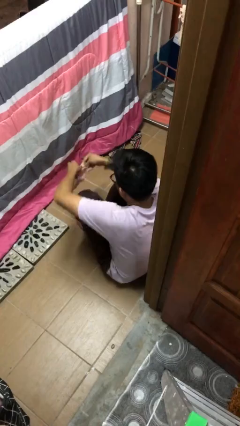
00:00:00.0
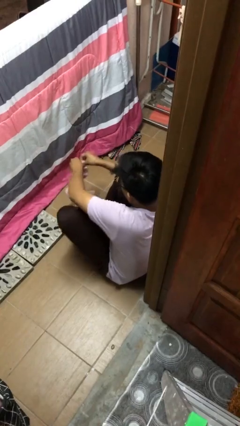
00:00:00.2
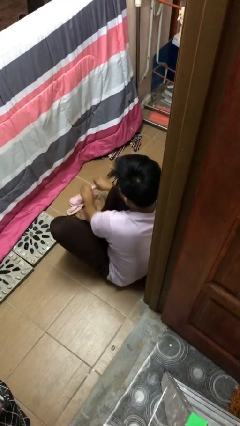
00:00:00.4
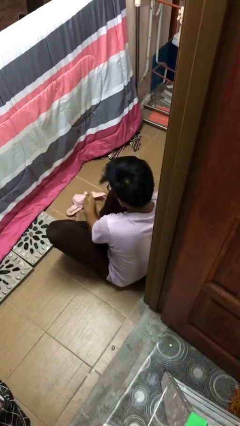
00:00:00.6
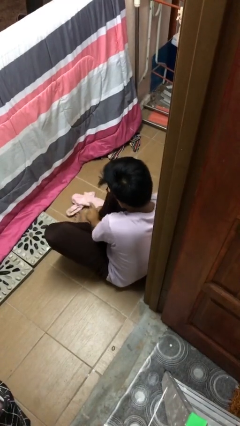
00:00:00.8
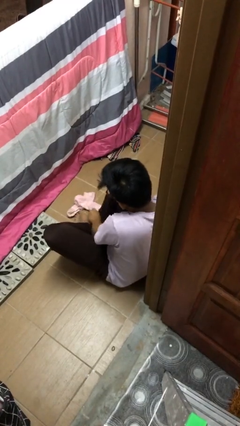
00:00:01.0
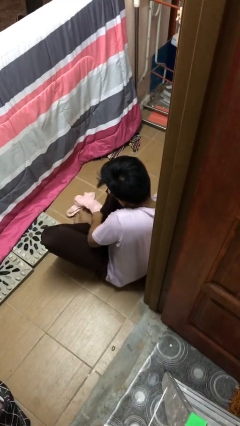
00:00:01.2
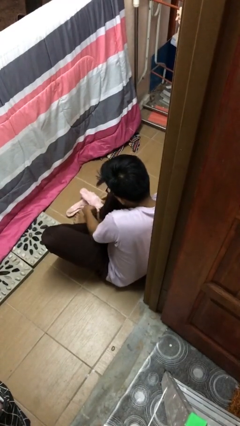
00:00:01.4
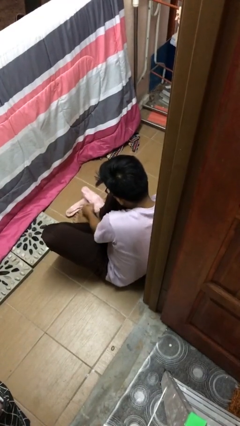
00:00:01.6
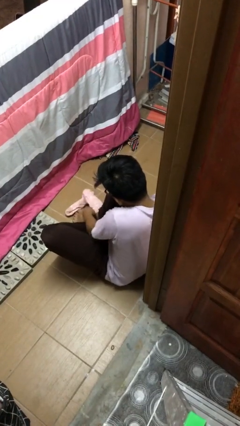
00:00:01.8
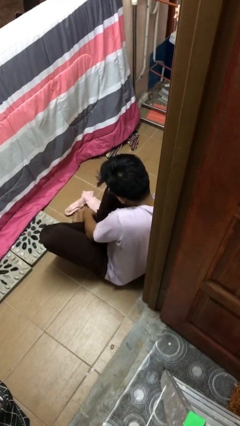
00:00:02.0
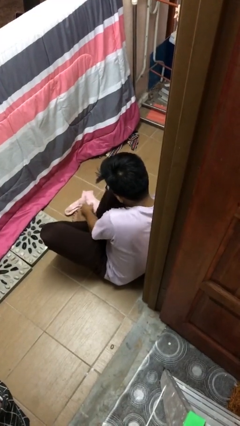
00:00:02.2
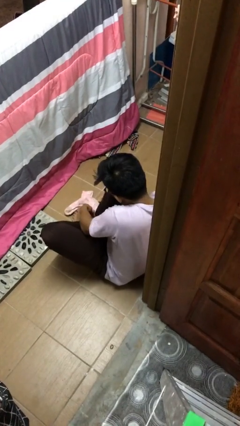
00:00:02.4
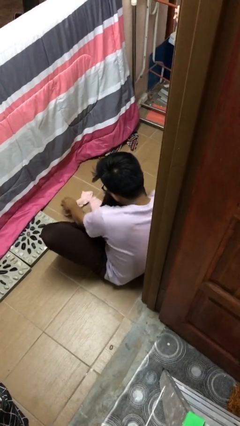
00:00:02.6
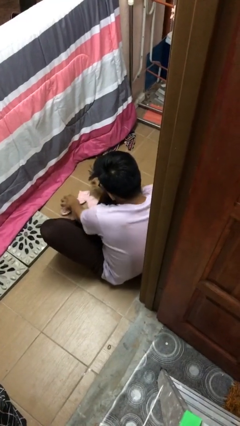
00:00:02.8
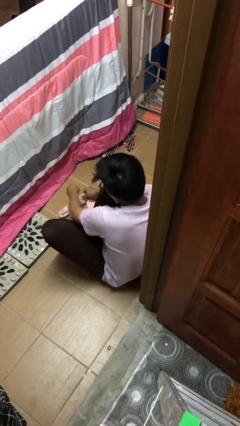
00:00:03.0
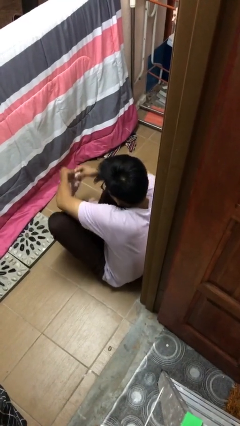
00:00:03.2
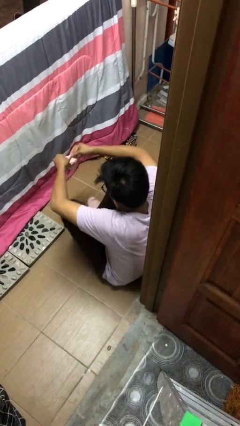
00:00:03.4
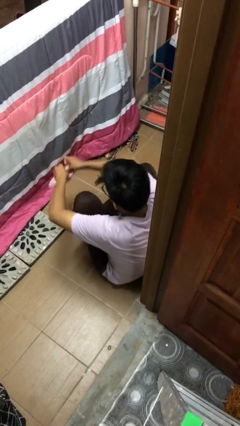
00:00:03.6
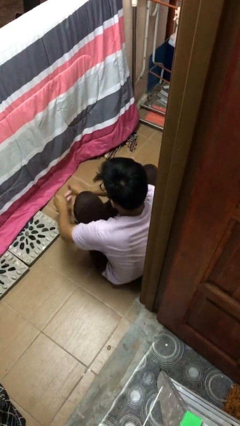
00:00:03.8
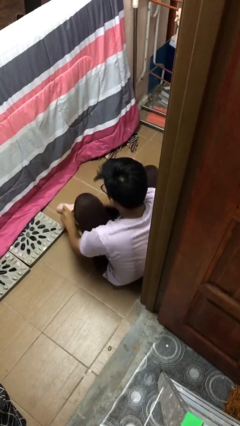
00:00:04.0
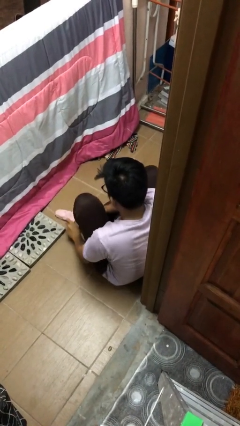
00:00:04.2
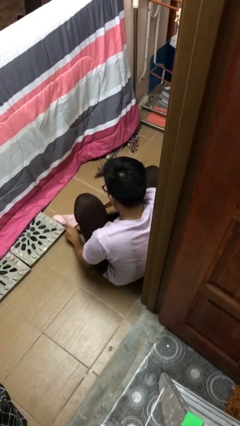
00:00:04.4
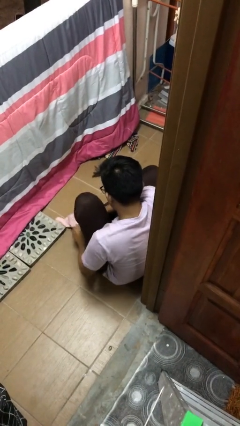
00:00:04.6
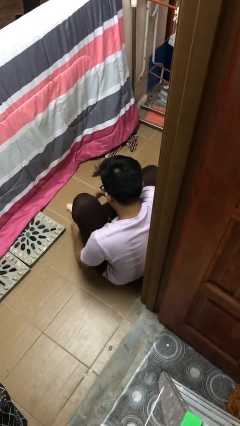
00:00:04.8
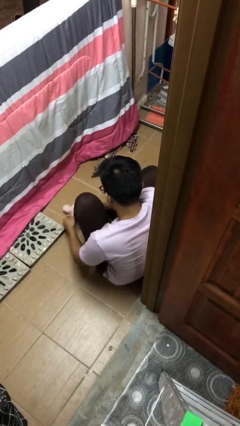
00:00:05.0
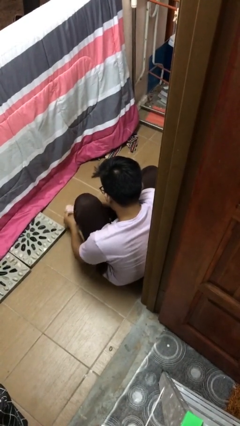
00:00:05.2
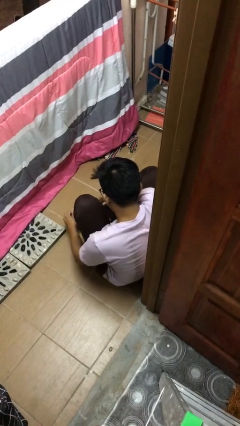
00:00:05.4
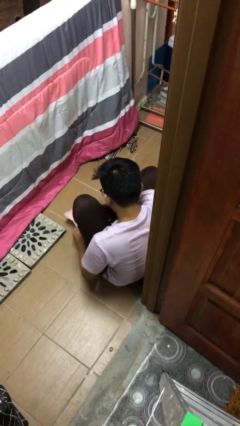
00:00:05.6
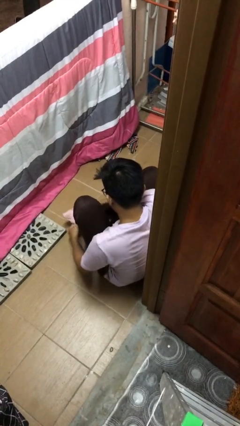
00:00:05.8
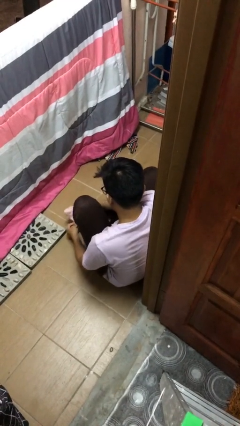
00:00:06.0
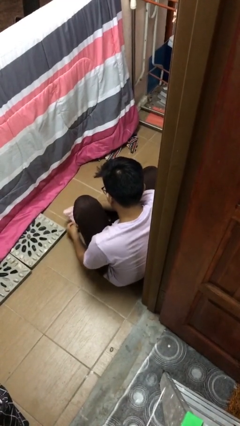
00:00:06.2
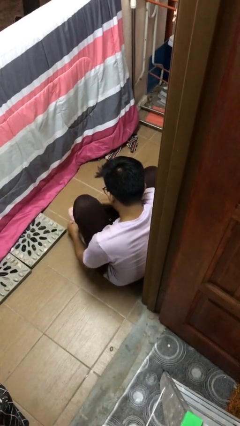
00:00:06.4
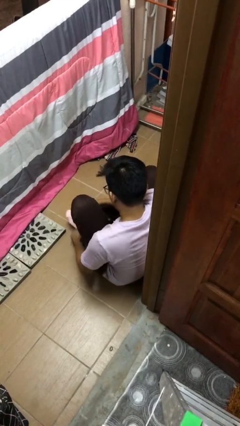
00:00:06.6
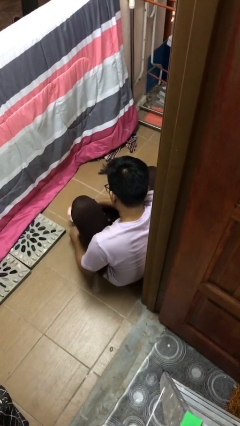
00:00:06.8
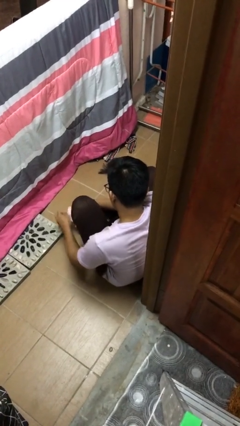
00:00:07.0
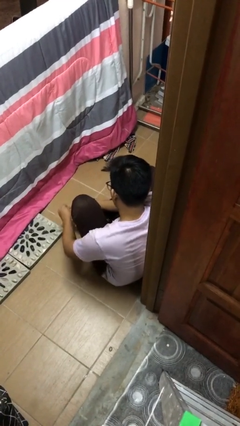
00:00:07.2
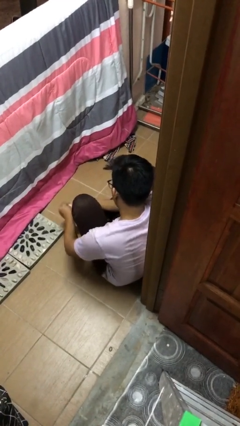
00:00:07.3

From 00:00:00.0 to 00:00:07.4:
person puts on socks

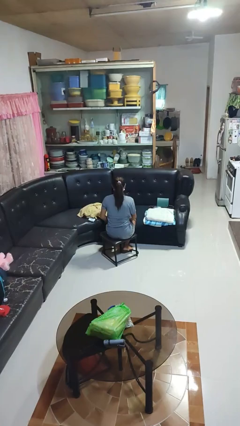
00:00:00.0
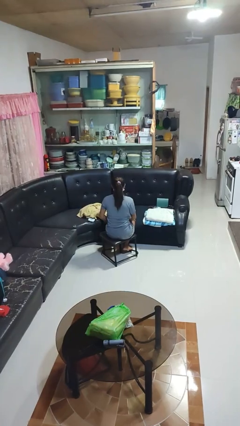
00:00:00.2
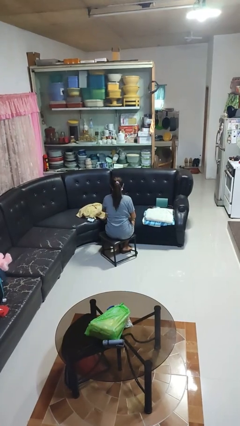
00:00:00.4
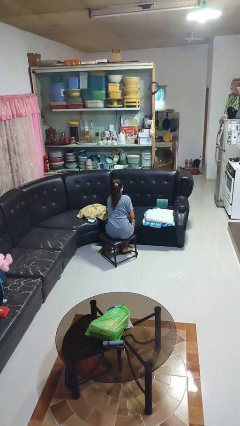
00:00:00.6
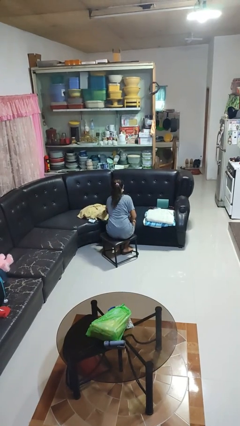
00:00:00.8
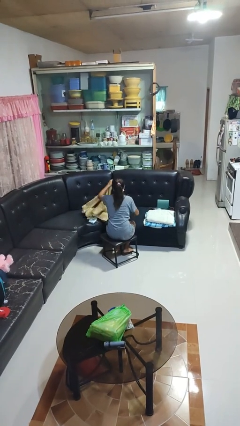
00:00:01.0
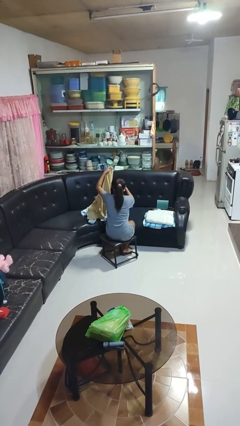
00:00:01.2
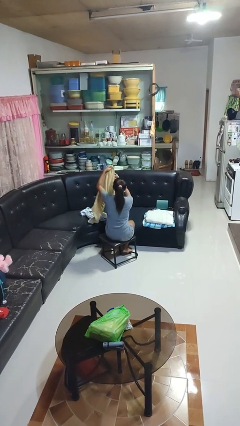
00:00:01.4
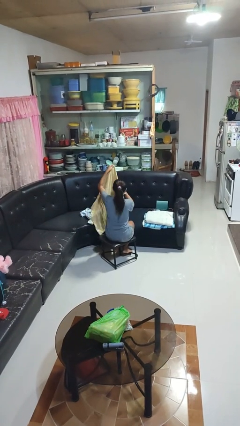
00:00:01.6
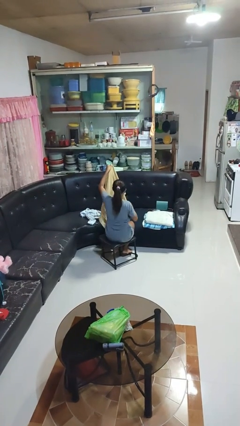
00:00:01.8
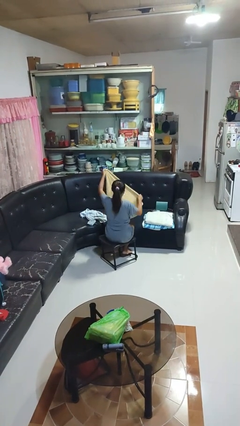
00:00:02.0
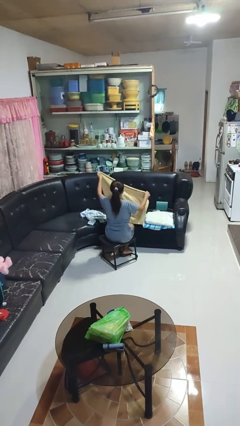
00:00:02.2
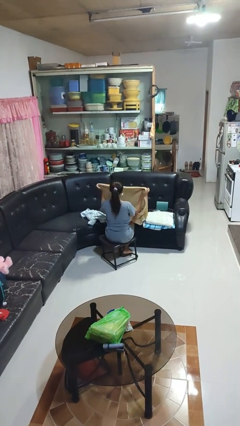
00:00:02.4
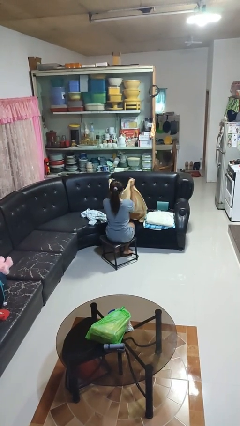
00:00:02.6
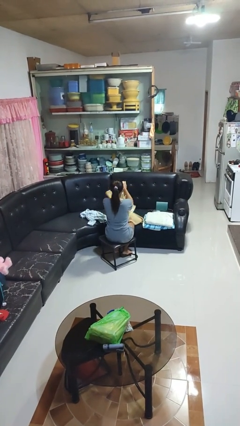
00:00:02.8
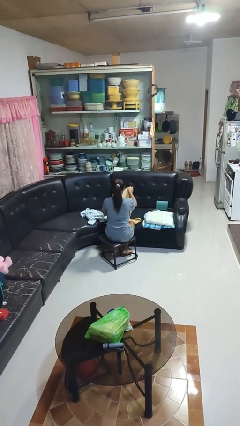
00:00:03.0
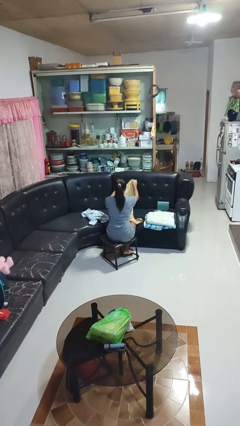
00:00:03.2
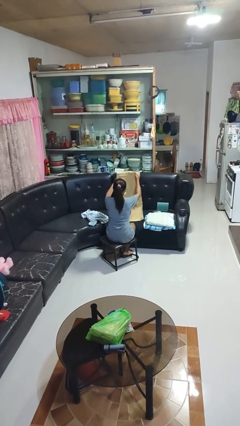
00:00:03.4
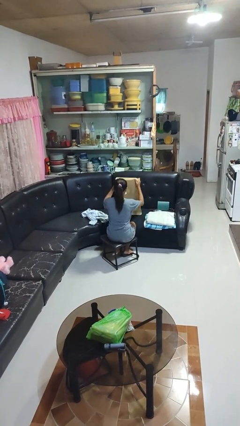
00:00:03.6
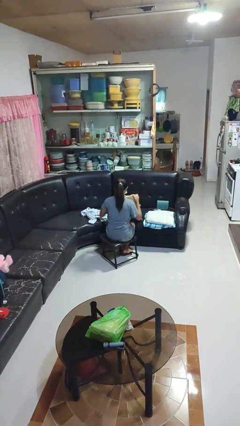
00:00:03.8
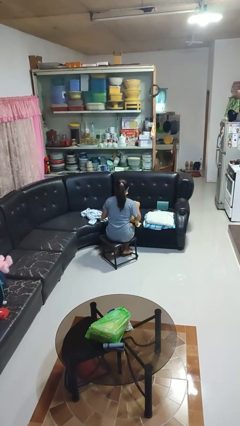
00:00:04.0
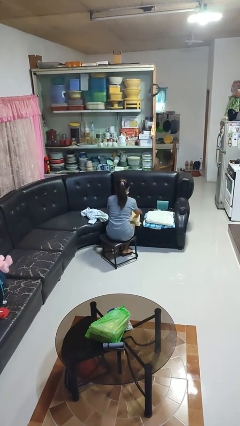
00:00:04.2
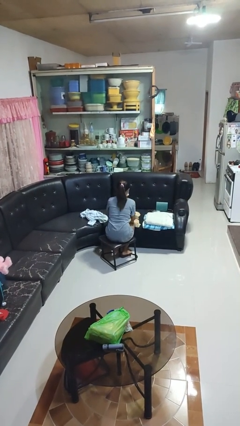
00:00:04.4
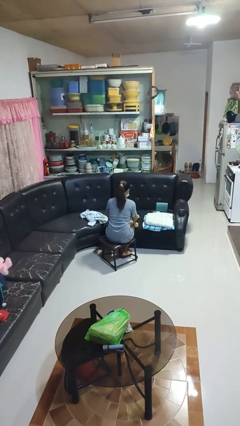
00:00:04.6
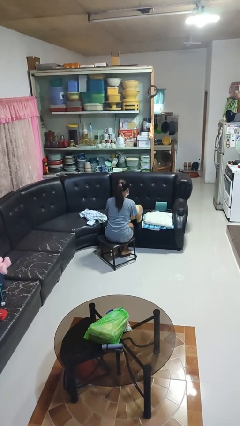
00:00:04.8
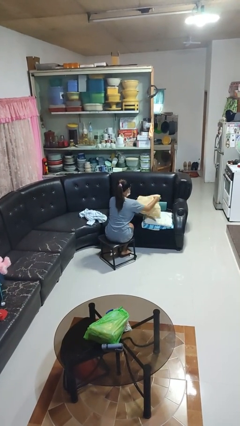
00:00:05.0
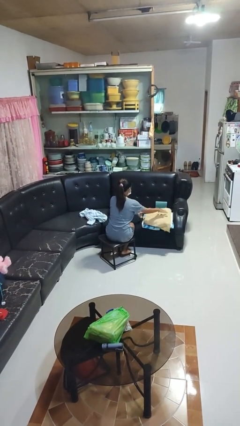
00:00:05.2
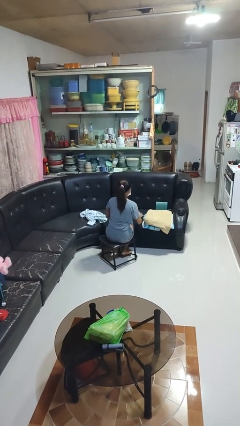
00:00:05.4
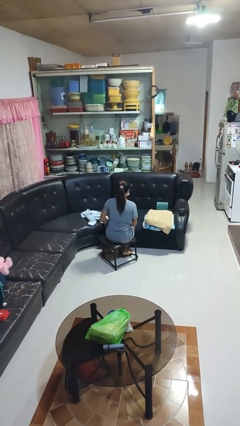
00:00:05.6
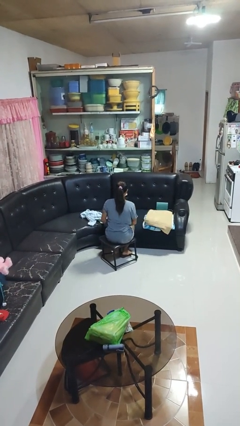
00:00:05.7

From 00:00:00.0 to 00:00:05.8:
person folds towel

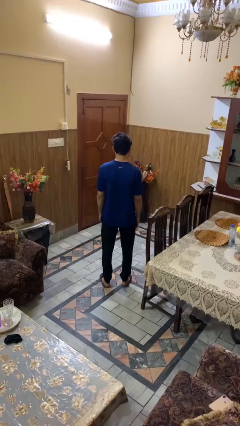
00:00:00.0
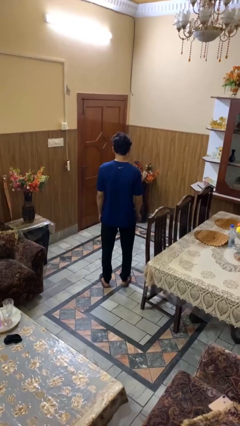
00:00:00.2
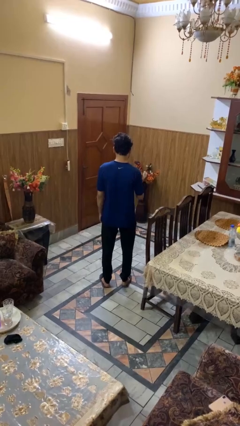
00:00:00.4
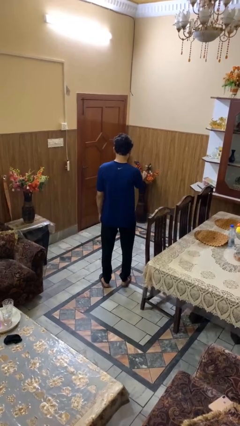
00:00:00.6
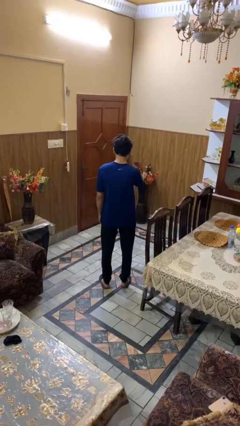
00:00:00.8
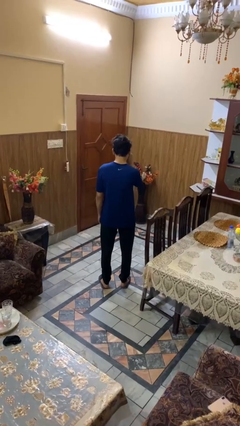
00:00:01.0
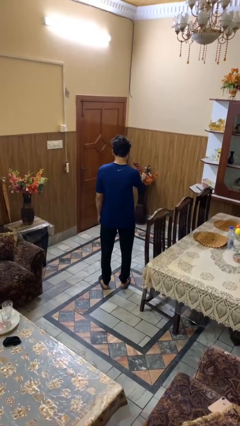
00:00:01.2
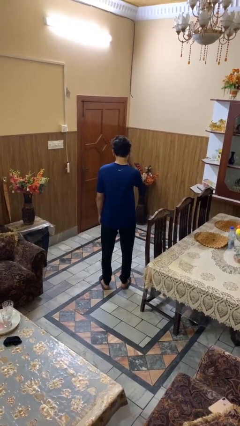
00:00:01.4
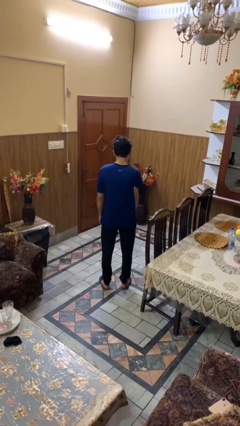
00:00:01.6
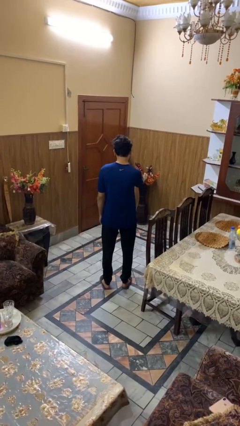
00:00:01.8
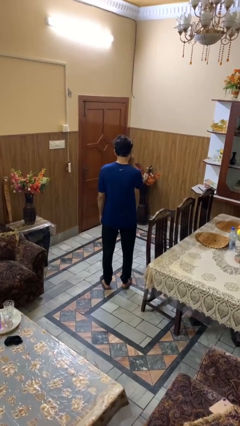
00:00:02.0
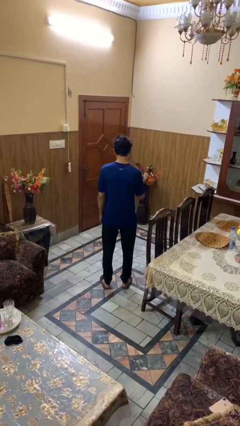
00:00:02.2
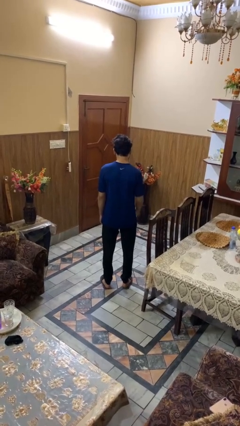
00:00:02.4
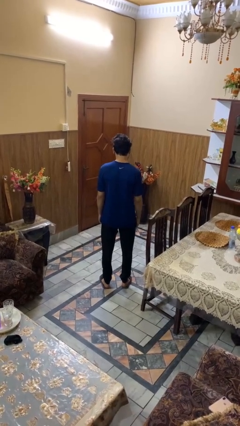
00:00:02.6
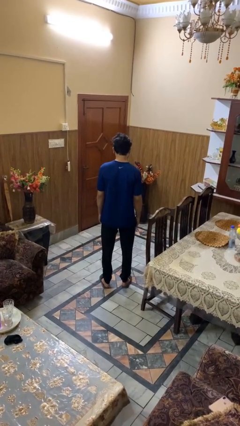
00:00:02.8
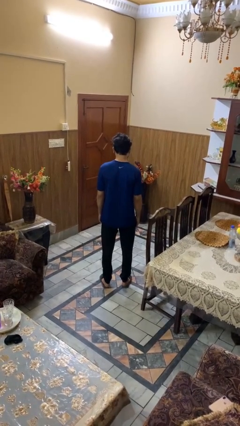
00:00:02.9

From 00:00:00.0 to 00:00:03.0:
person rubs eyes

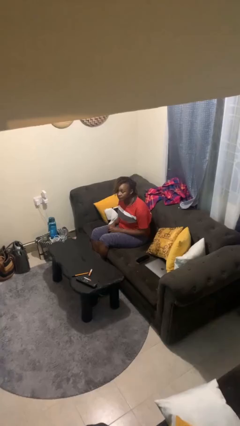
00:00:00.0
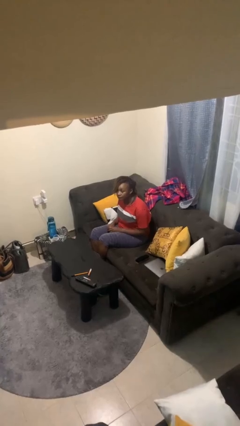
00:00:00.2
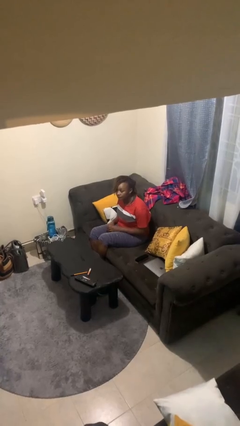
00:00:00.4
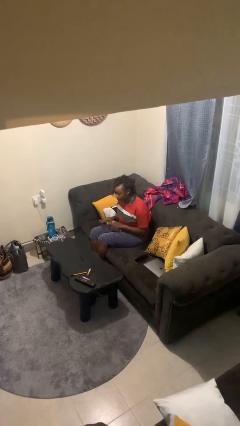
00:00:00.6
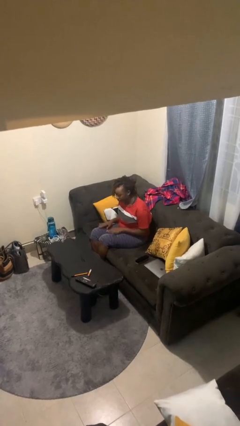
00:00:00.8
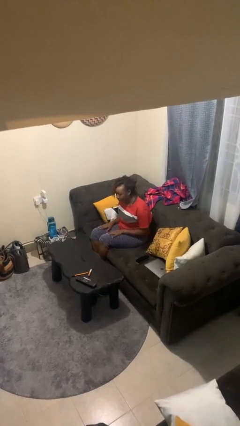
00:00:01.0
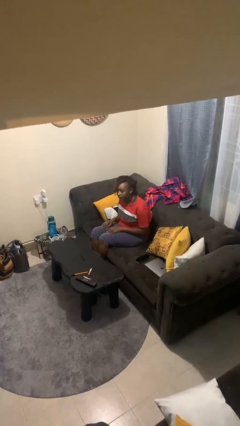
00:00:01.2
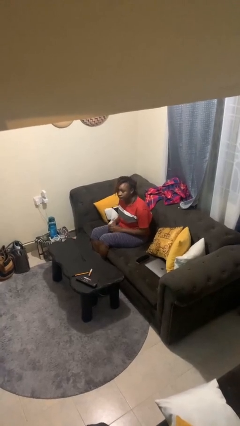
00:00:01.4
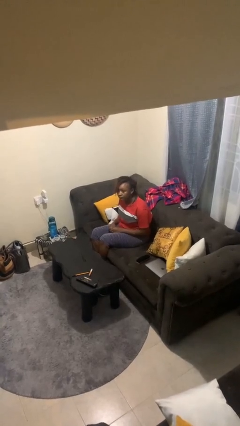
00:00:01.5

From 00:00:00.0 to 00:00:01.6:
person slaps hands on thighs
